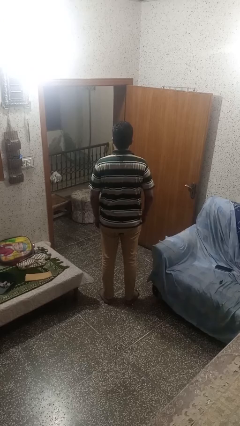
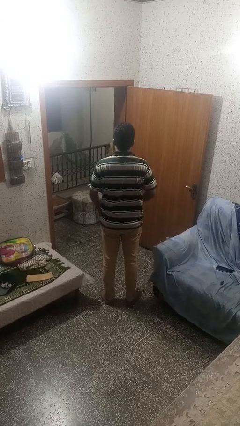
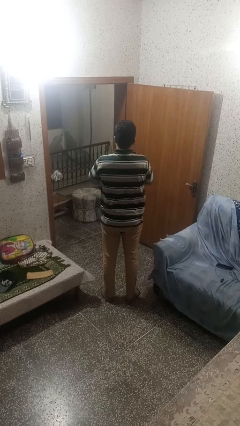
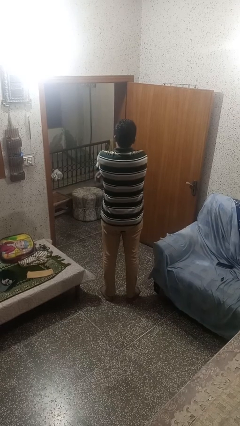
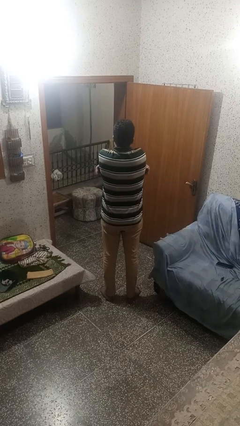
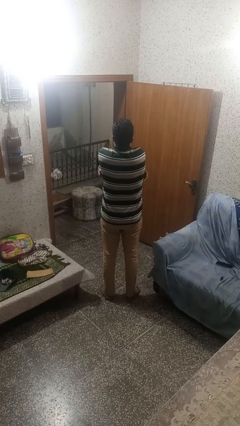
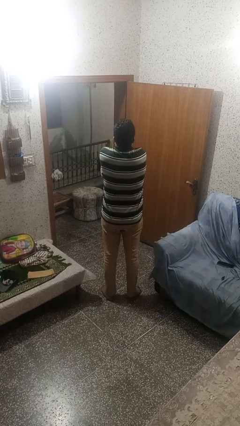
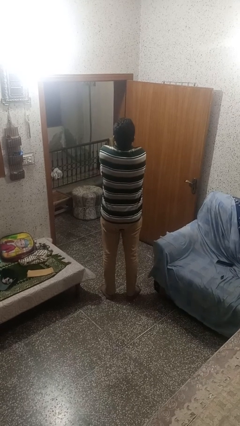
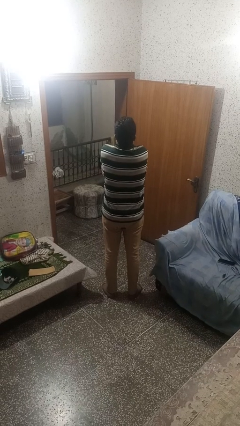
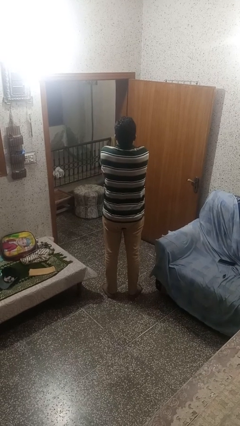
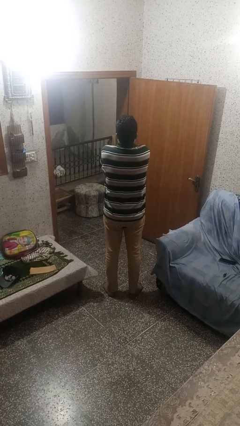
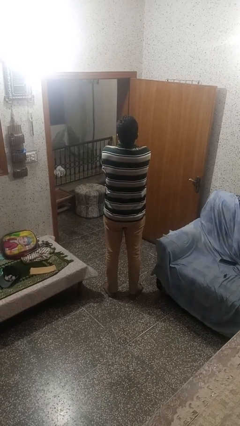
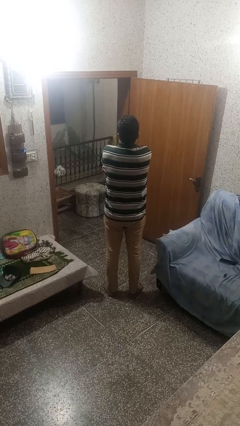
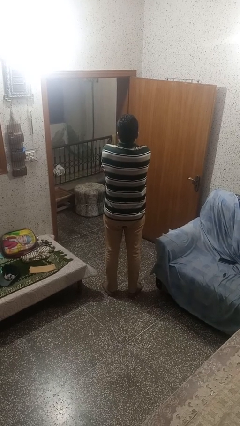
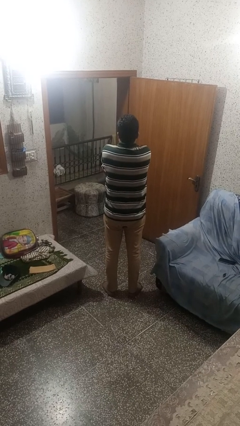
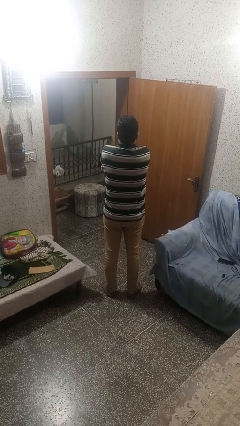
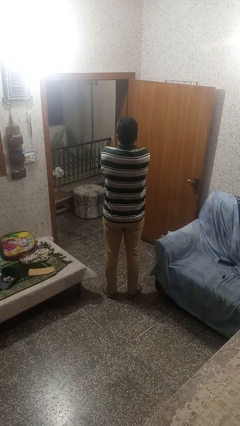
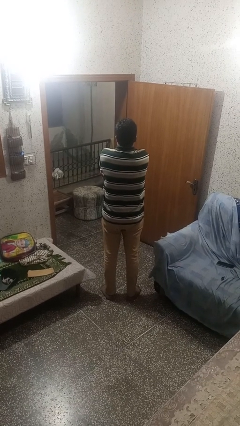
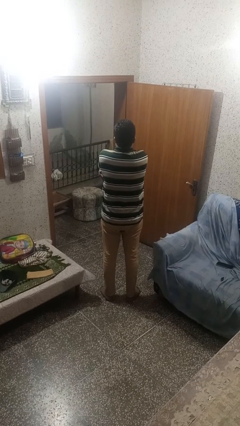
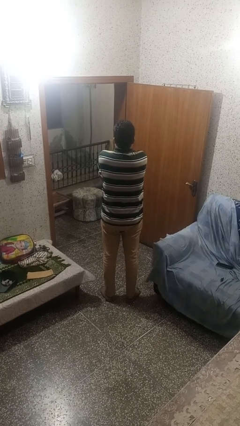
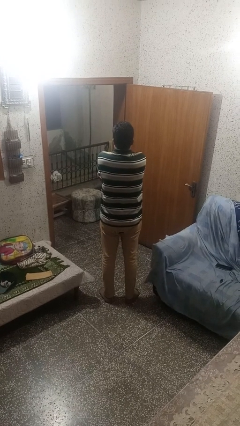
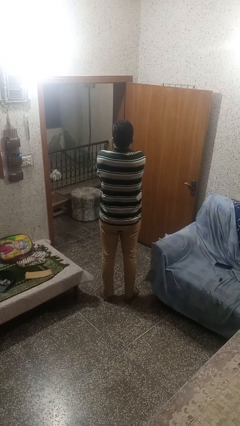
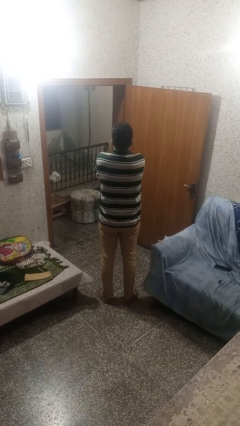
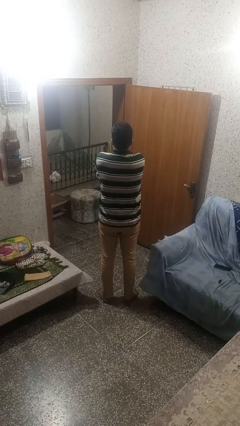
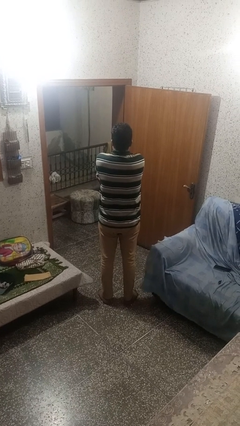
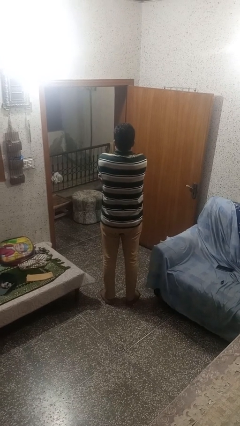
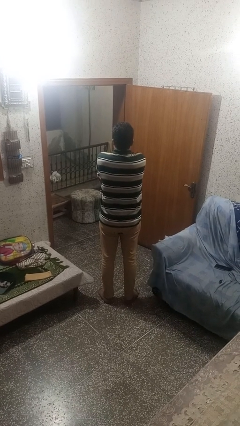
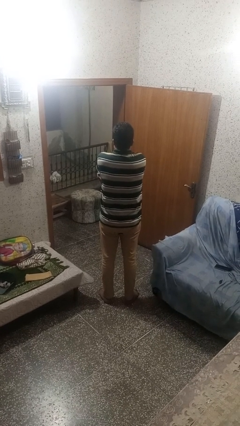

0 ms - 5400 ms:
person crosses arms

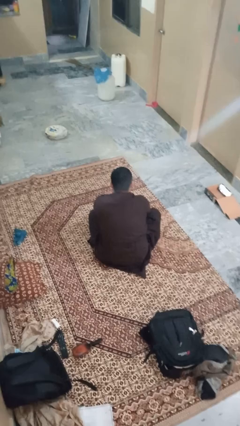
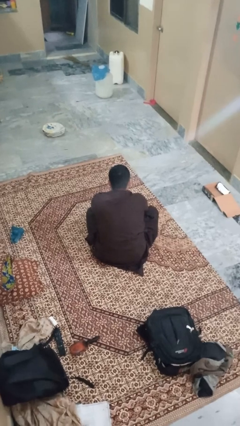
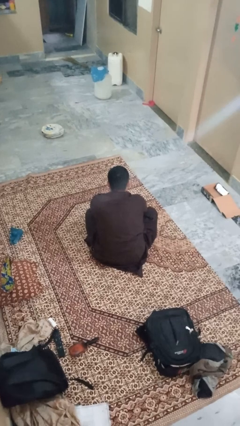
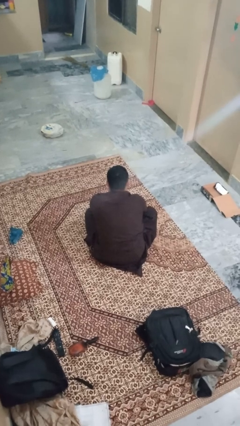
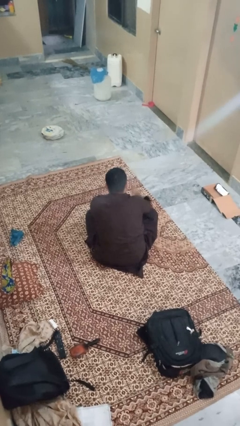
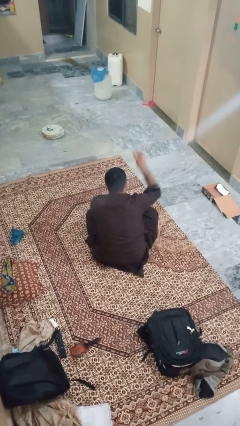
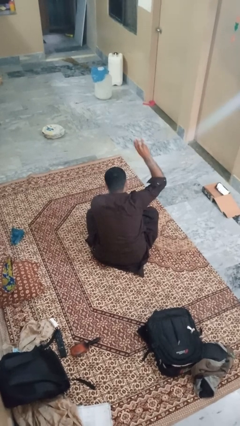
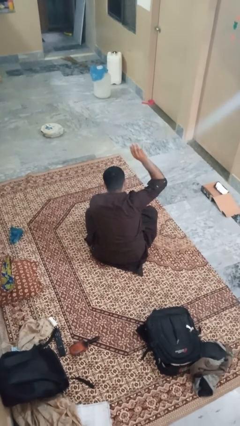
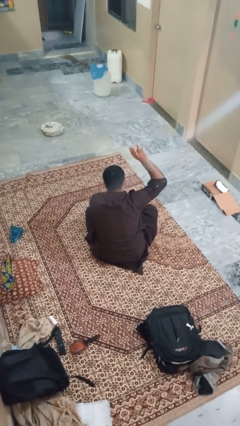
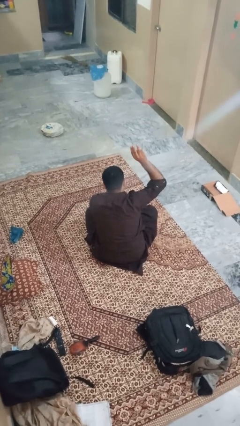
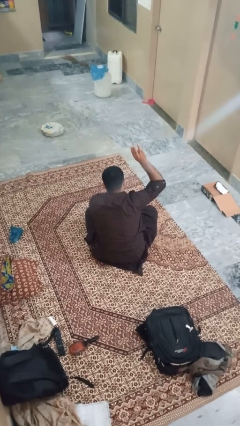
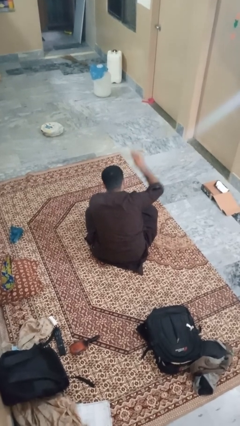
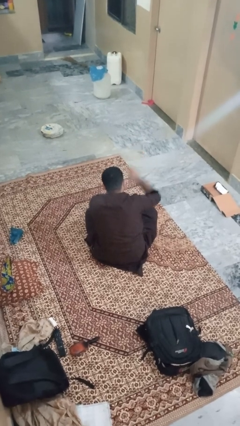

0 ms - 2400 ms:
person gestures number three

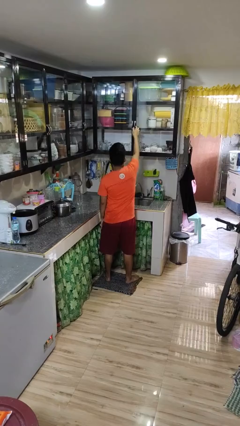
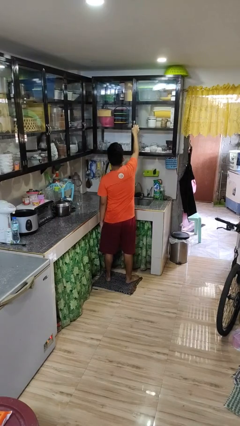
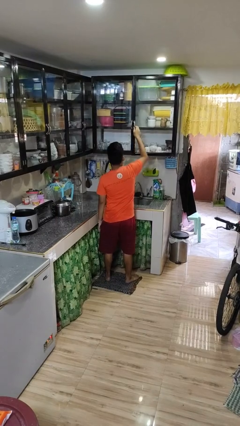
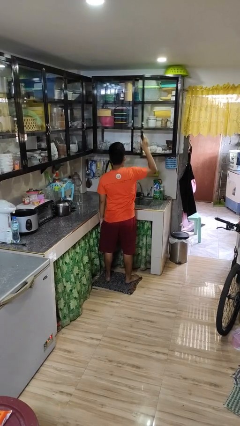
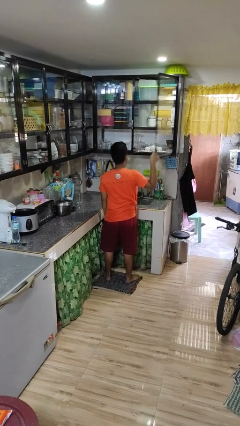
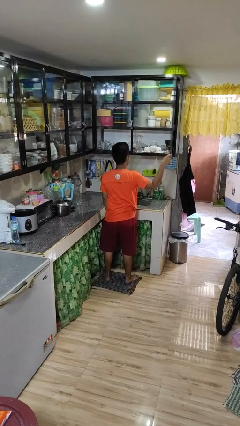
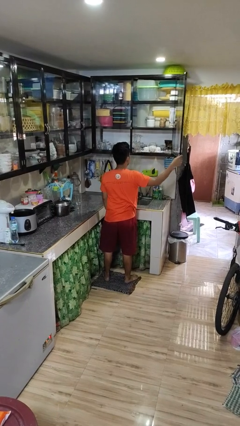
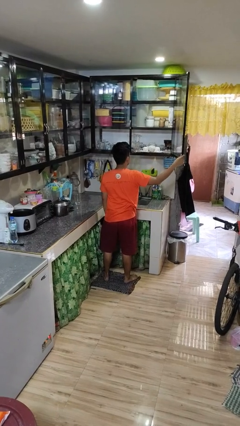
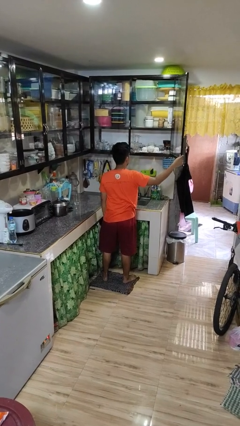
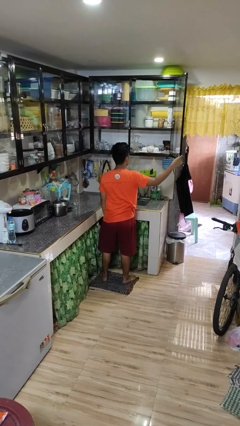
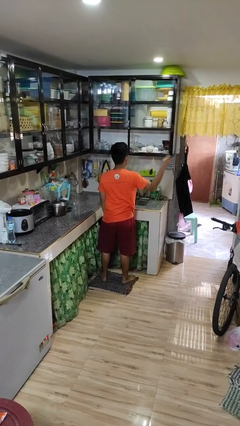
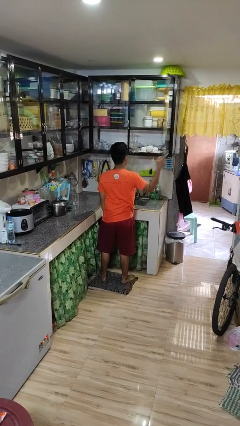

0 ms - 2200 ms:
person opens cabinet

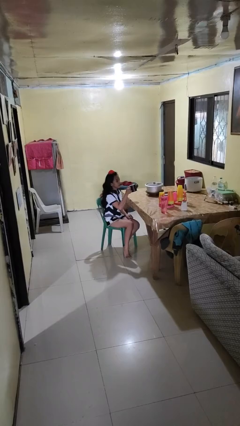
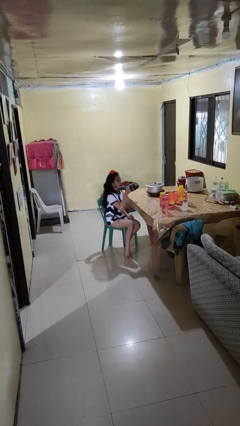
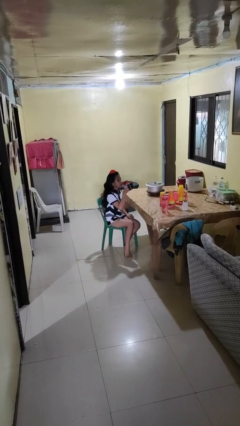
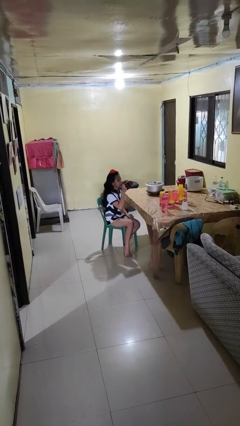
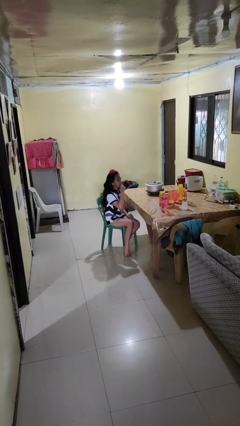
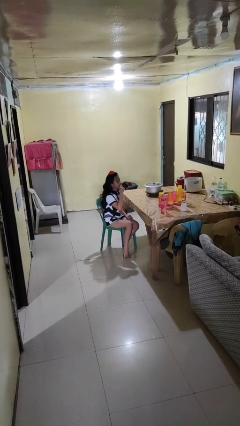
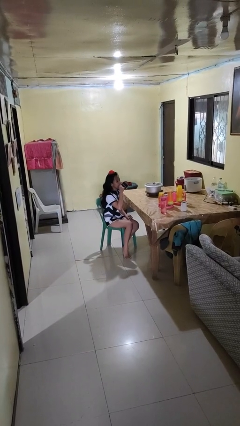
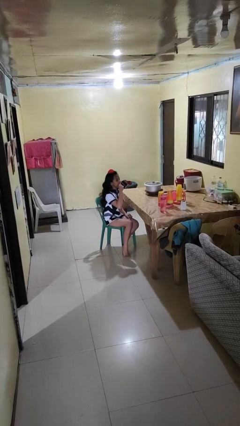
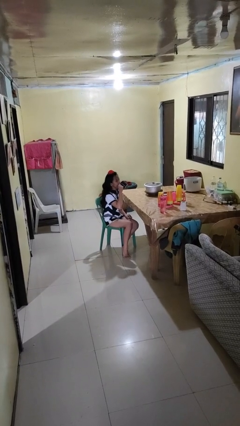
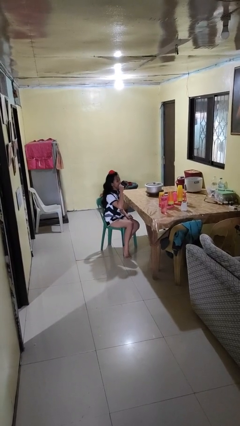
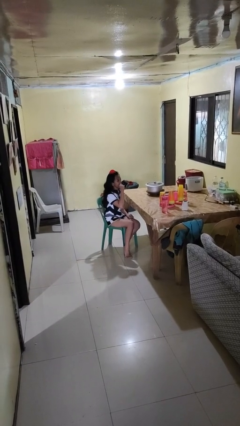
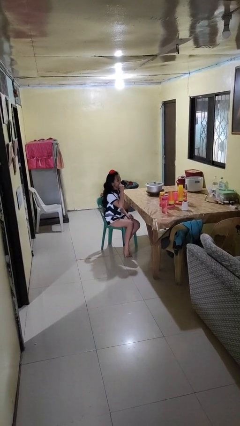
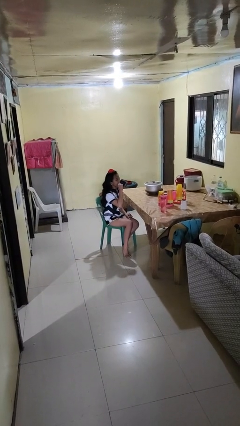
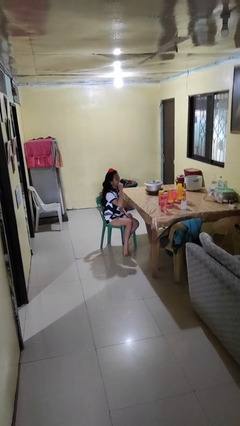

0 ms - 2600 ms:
person drinks from mug

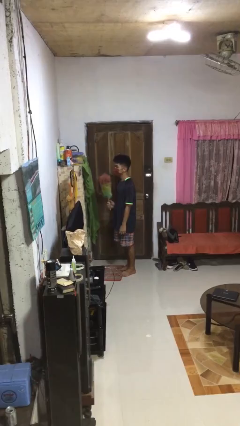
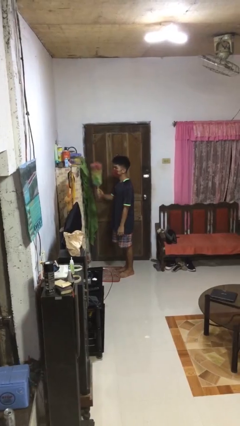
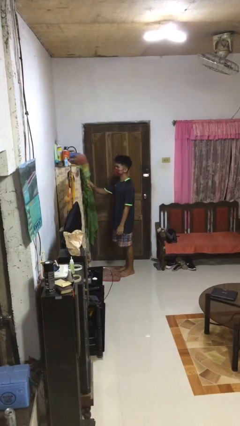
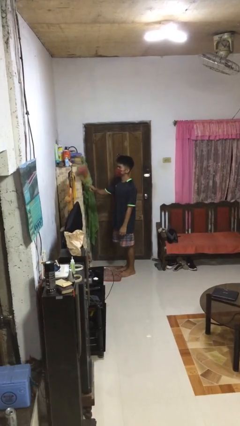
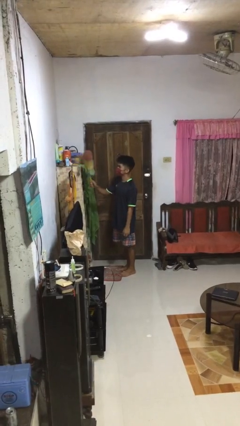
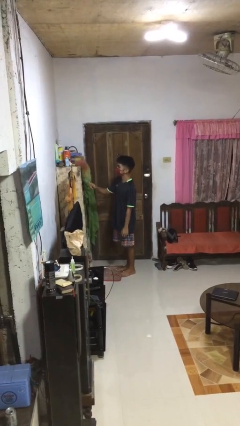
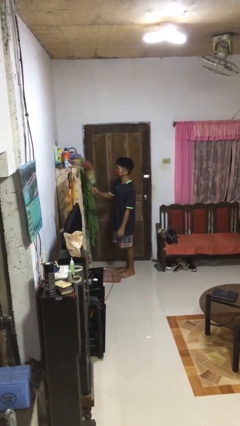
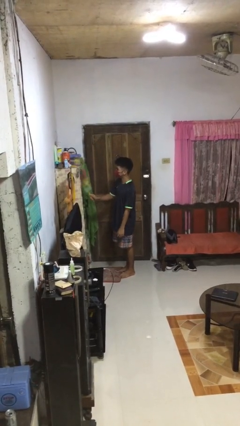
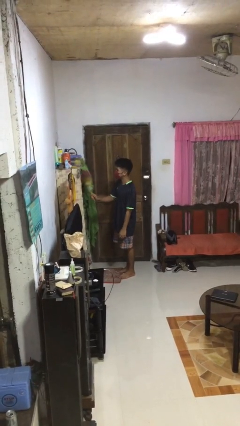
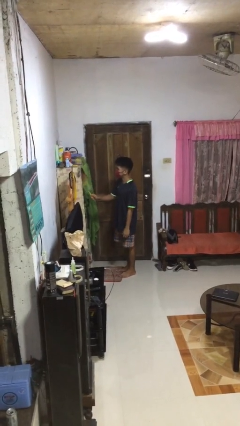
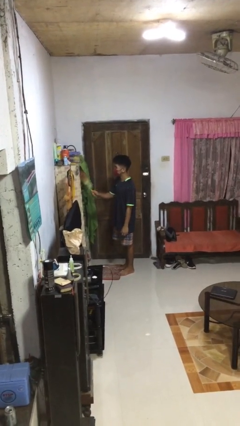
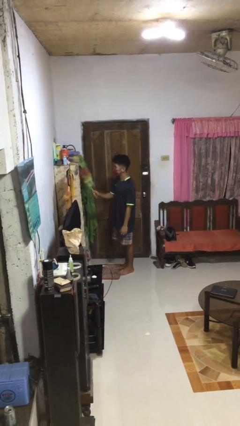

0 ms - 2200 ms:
person dusts furniture

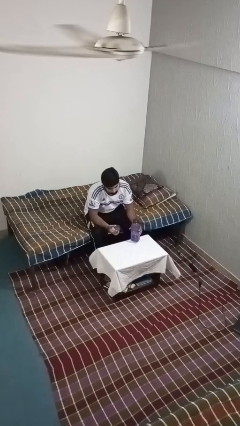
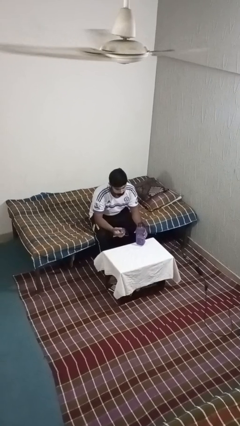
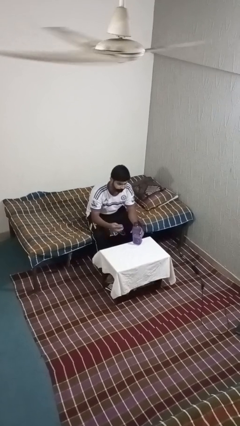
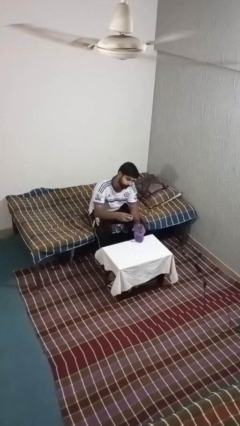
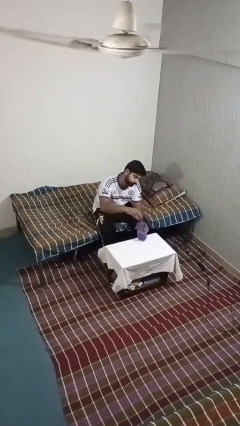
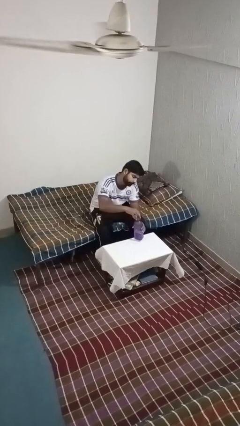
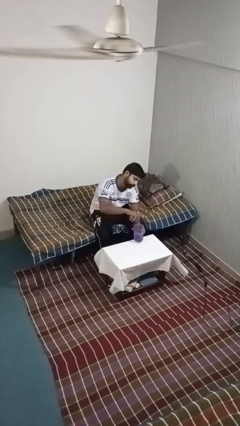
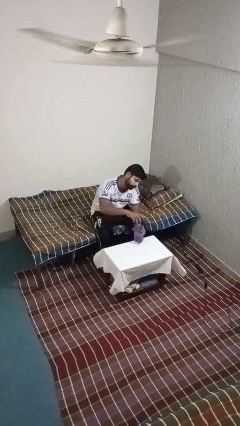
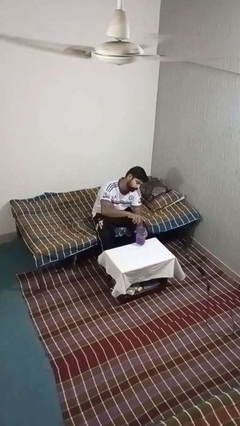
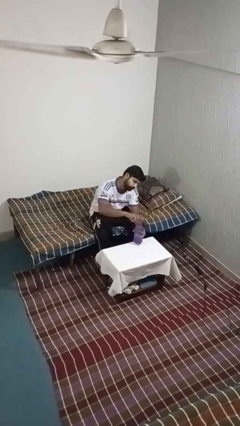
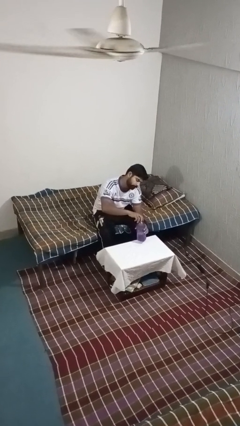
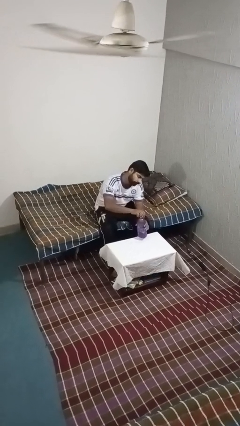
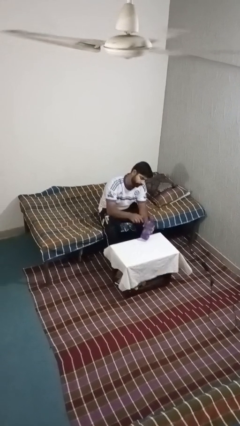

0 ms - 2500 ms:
person screws lid to bottle
